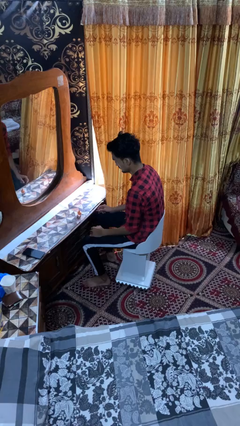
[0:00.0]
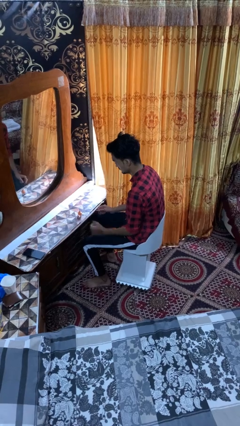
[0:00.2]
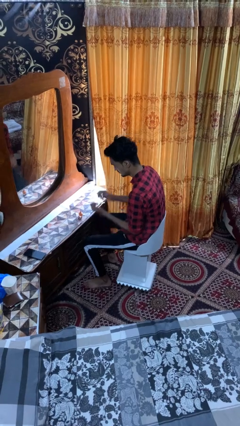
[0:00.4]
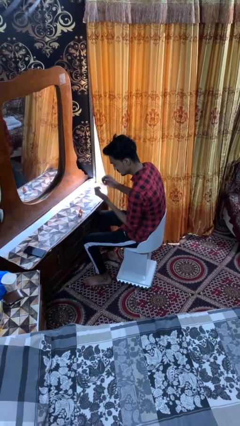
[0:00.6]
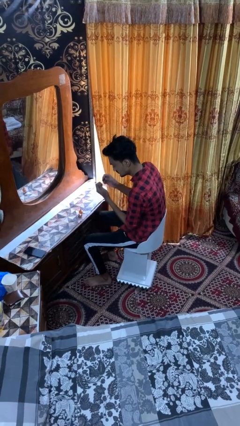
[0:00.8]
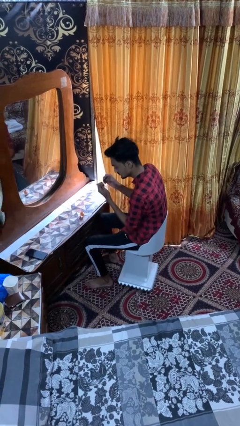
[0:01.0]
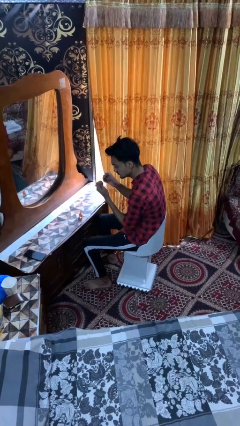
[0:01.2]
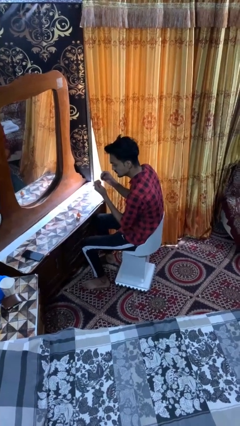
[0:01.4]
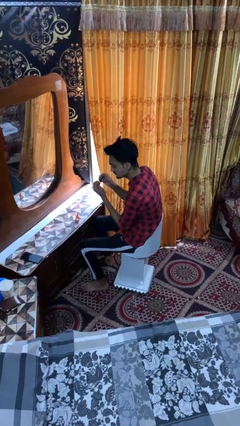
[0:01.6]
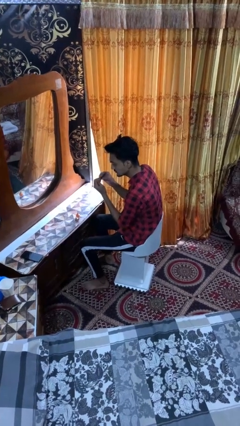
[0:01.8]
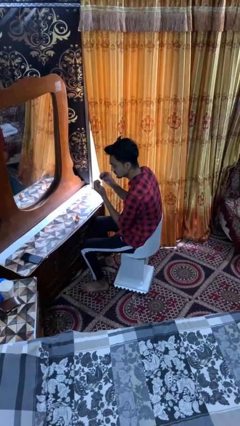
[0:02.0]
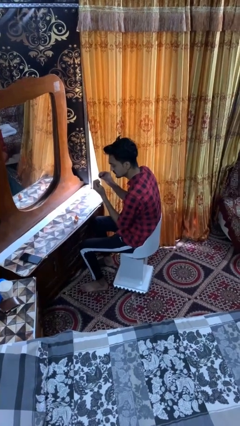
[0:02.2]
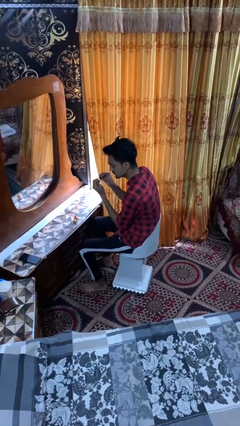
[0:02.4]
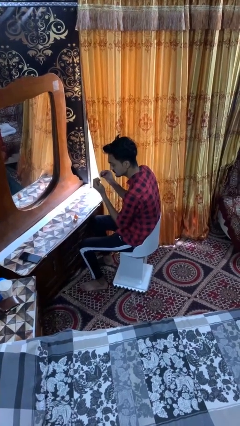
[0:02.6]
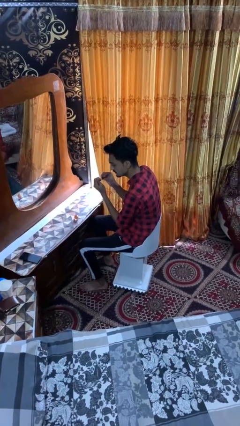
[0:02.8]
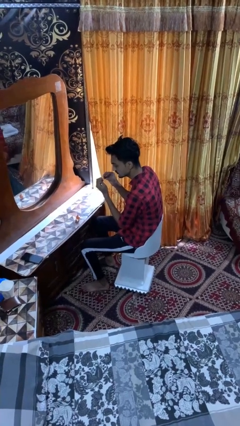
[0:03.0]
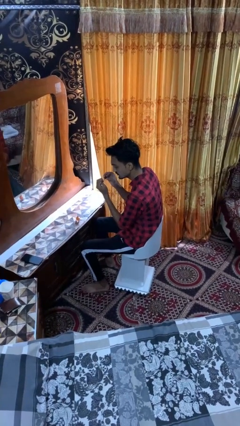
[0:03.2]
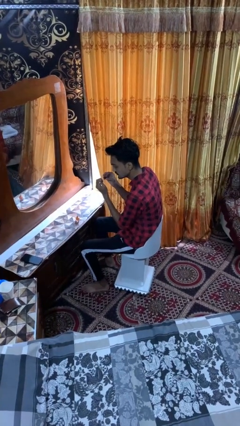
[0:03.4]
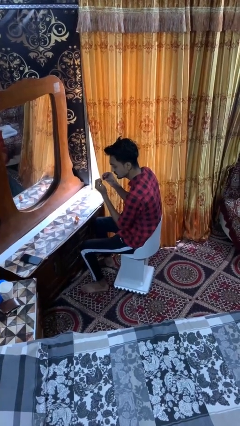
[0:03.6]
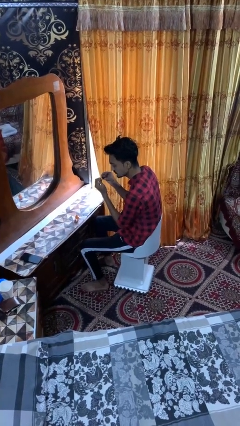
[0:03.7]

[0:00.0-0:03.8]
person paints fingernails

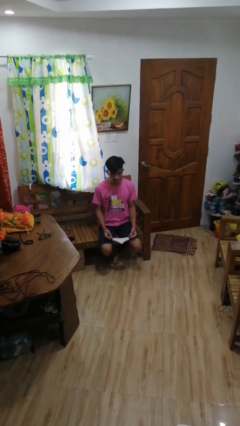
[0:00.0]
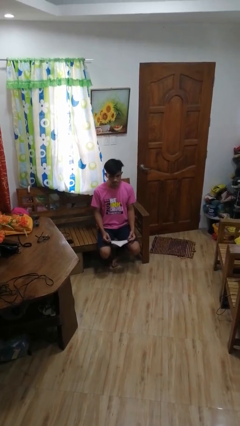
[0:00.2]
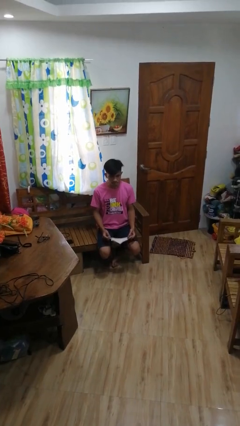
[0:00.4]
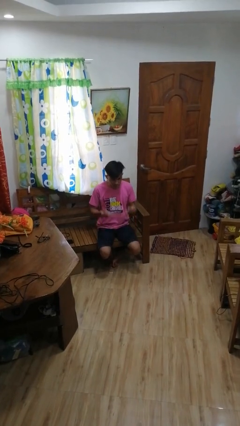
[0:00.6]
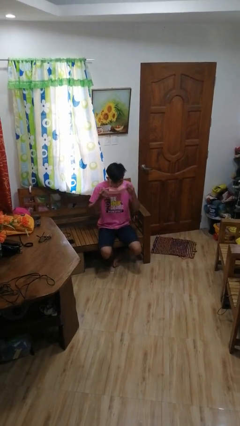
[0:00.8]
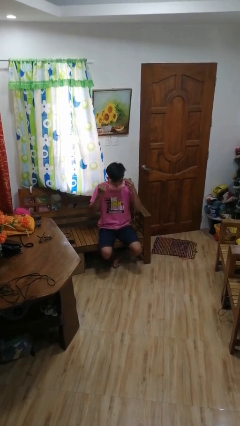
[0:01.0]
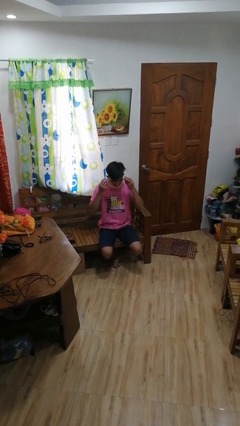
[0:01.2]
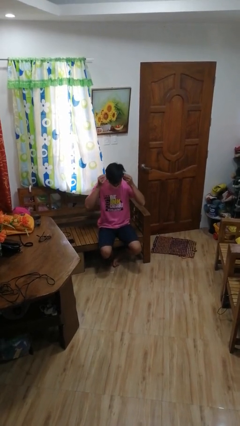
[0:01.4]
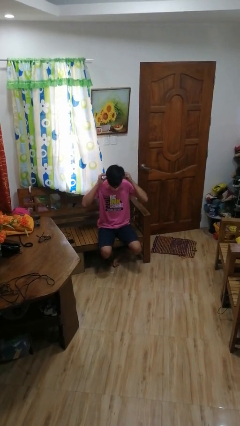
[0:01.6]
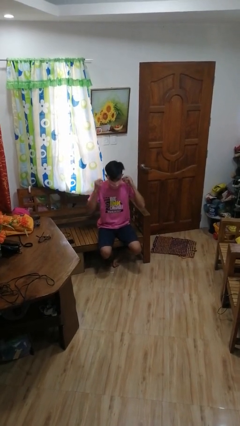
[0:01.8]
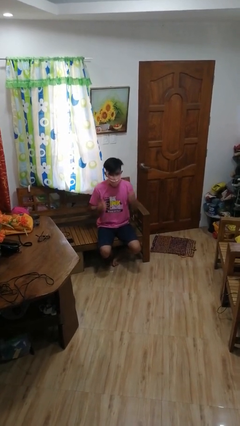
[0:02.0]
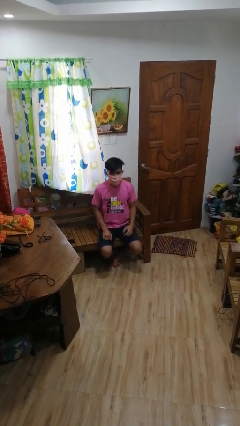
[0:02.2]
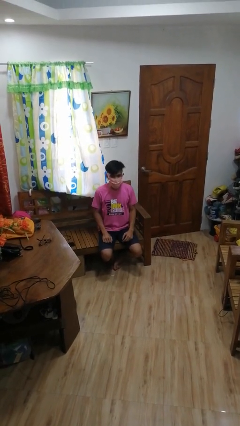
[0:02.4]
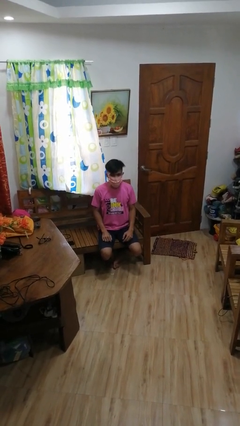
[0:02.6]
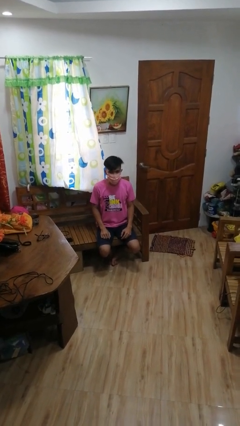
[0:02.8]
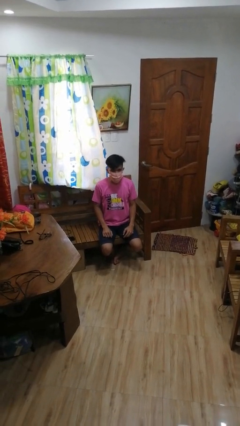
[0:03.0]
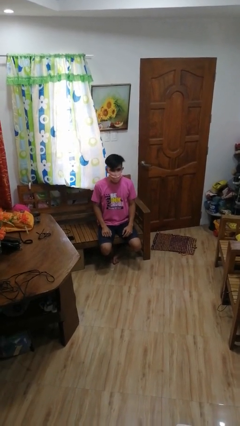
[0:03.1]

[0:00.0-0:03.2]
person puts on facemask

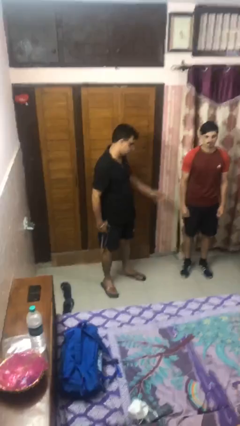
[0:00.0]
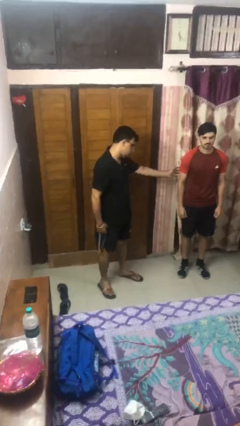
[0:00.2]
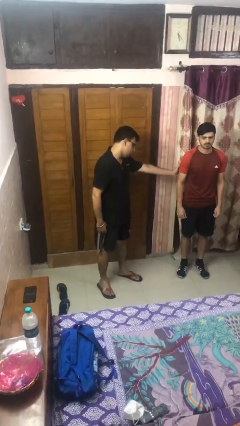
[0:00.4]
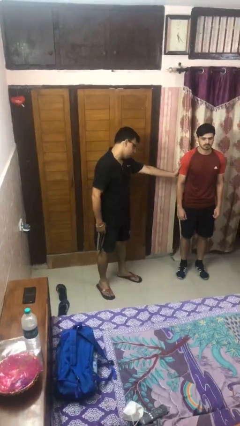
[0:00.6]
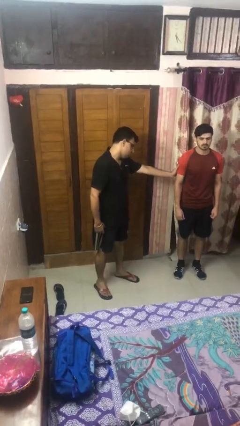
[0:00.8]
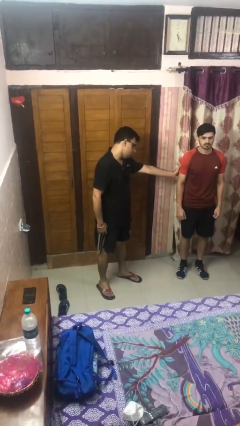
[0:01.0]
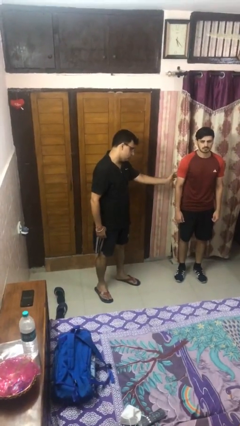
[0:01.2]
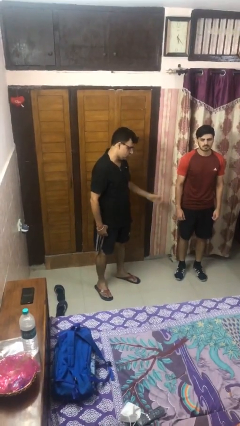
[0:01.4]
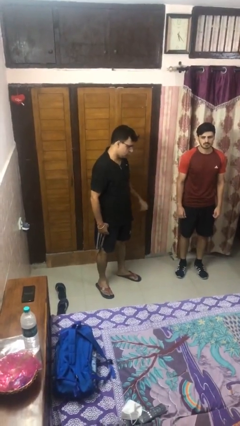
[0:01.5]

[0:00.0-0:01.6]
person grabs person by bicep

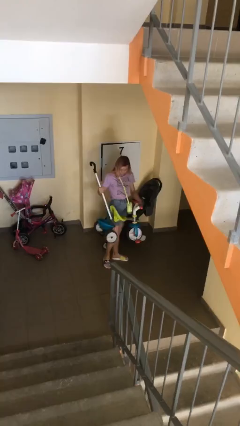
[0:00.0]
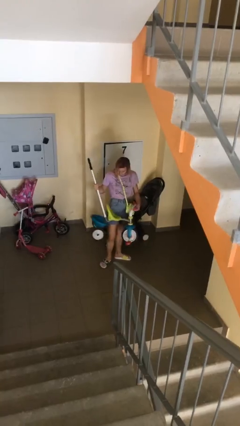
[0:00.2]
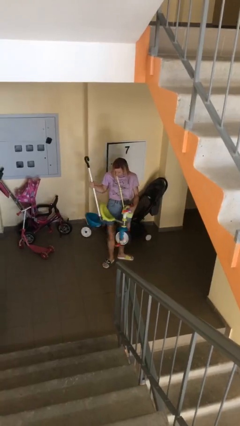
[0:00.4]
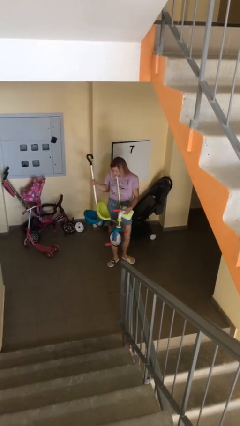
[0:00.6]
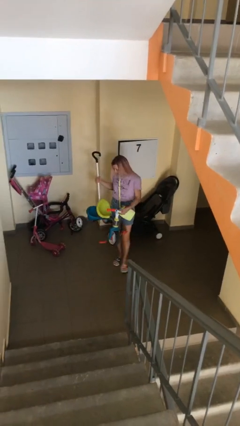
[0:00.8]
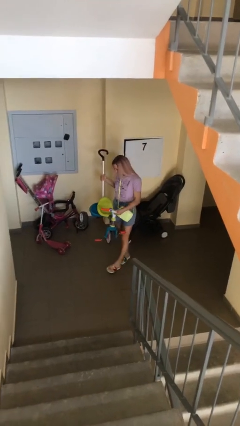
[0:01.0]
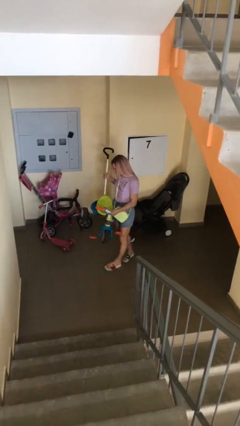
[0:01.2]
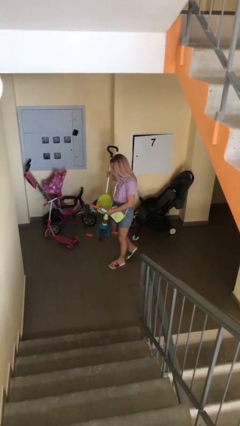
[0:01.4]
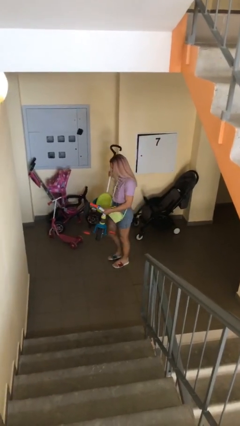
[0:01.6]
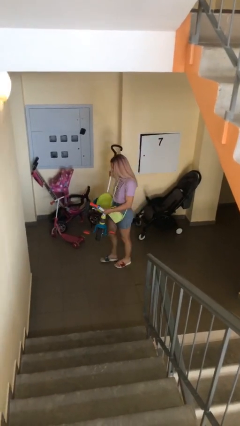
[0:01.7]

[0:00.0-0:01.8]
person carries bicycle

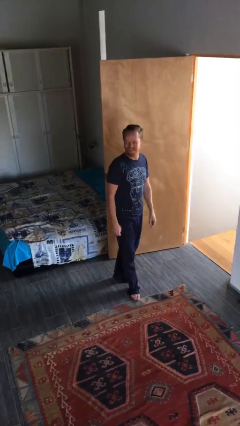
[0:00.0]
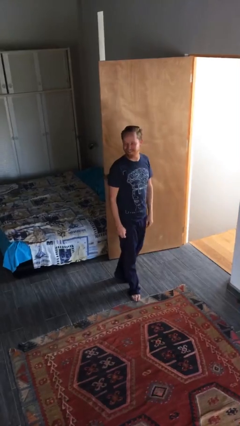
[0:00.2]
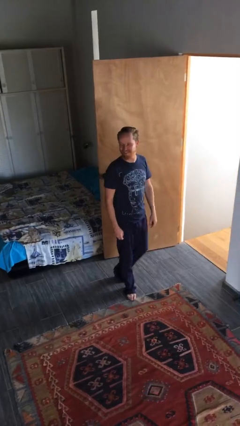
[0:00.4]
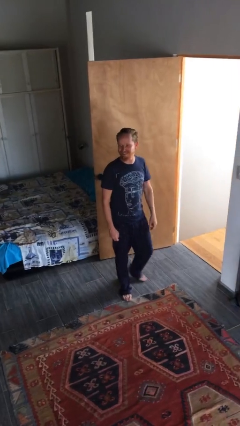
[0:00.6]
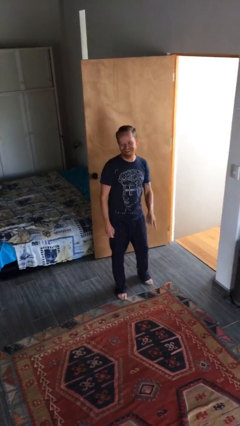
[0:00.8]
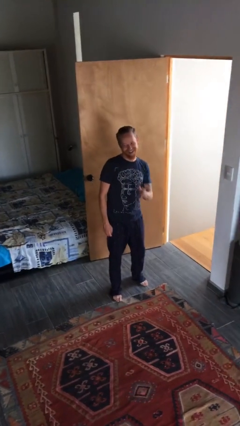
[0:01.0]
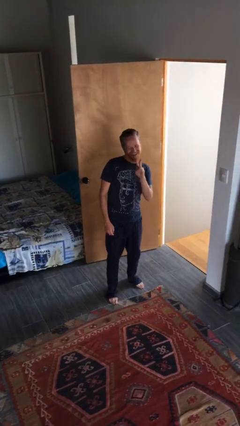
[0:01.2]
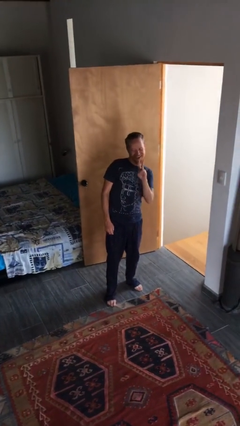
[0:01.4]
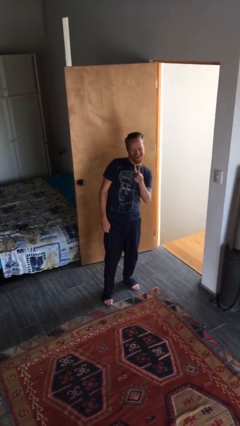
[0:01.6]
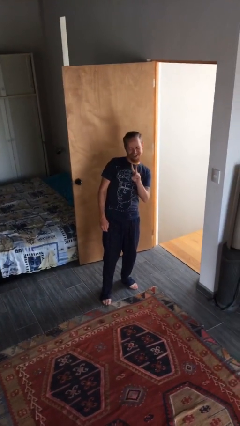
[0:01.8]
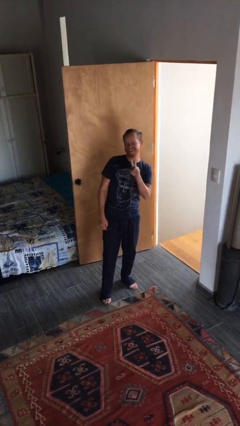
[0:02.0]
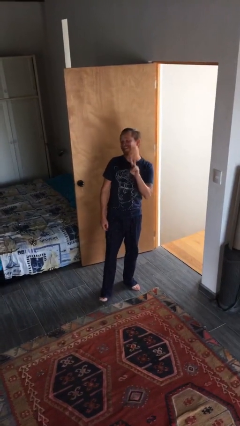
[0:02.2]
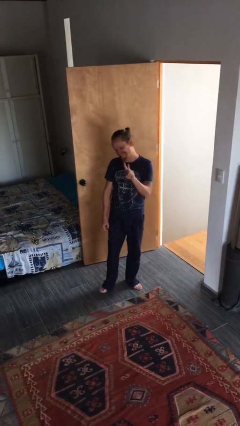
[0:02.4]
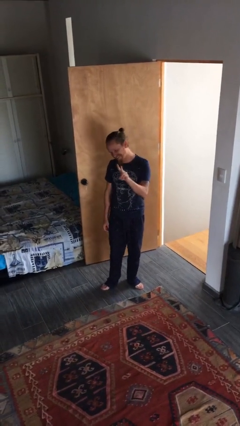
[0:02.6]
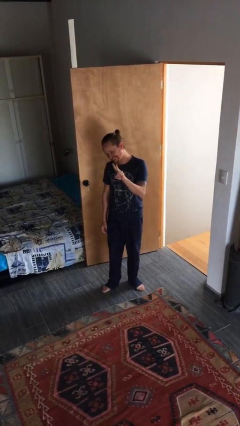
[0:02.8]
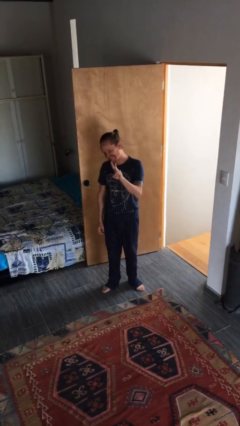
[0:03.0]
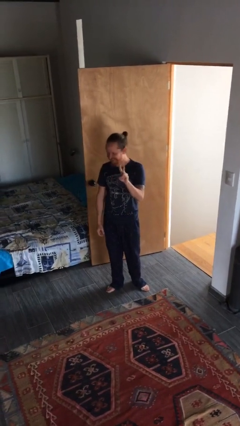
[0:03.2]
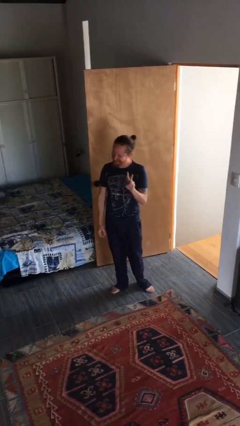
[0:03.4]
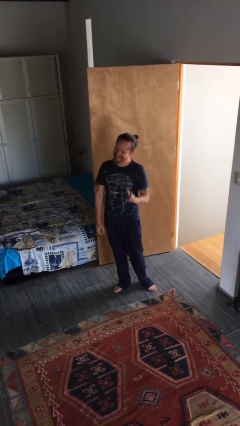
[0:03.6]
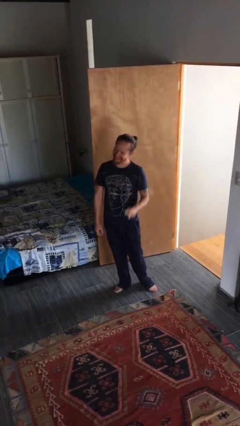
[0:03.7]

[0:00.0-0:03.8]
person gestures peace

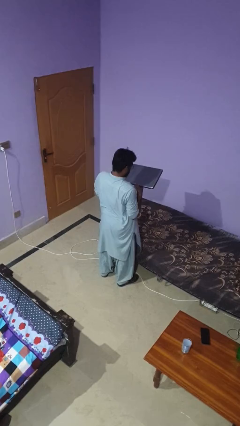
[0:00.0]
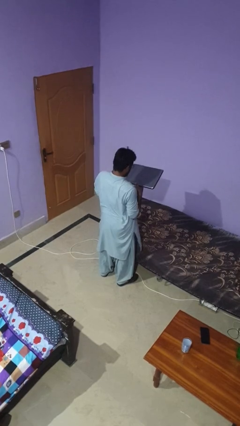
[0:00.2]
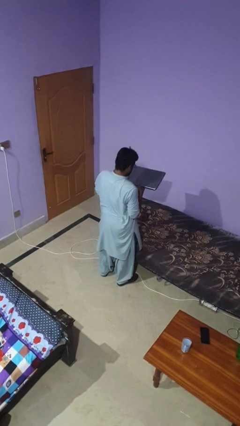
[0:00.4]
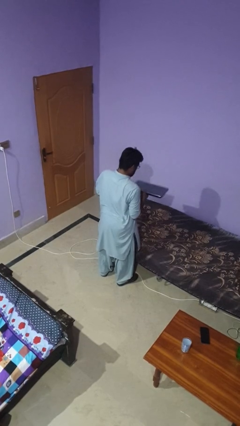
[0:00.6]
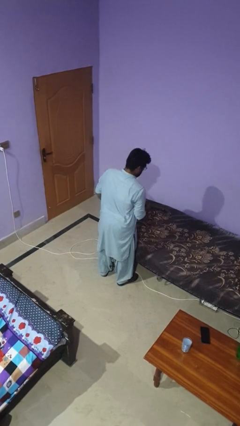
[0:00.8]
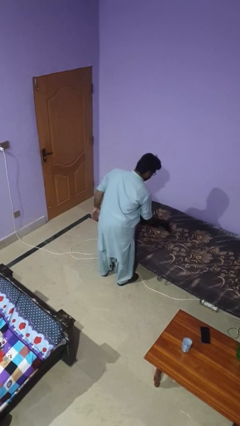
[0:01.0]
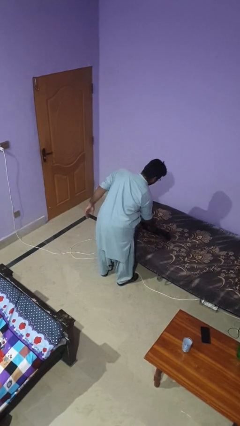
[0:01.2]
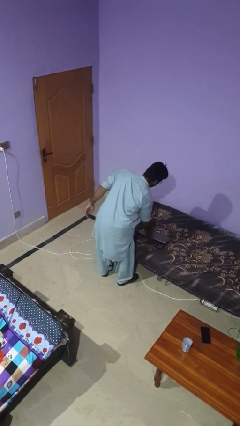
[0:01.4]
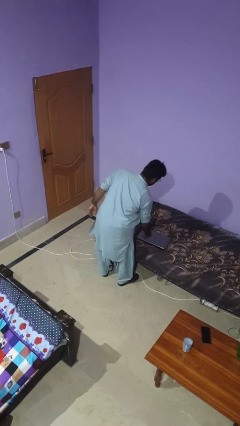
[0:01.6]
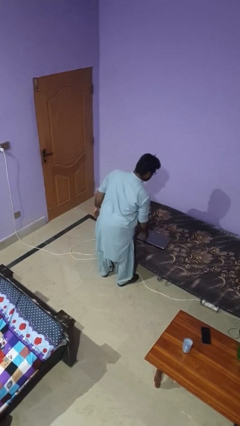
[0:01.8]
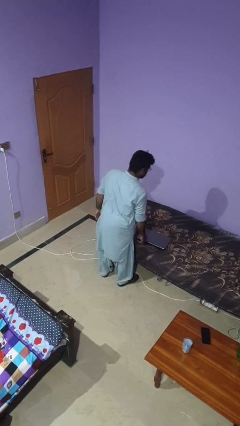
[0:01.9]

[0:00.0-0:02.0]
person puts down object on bed

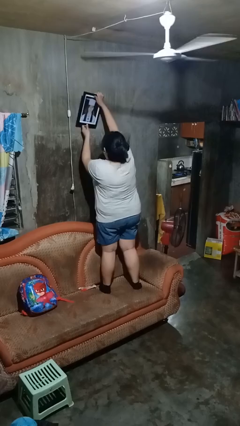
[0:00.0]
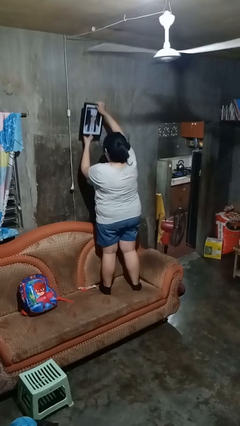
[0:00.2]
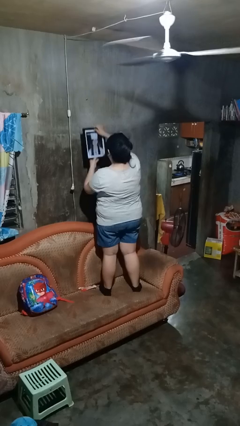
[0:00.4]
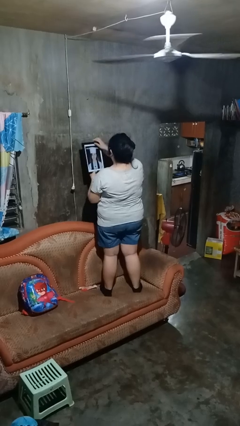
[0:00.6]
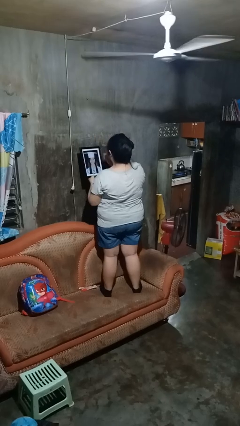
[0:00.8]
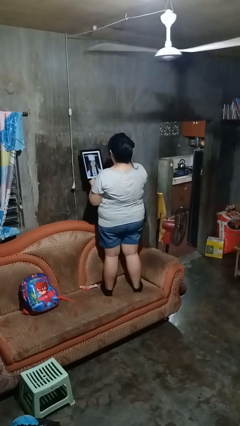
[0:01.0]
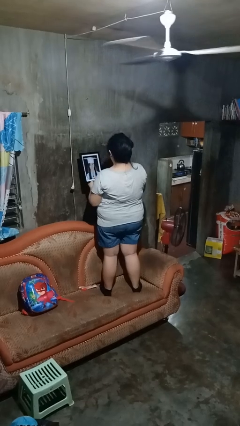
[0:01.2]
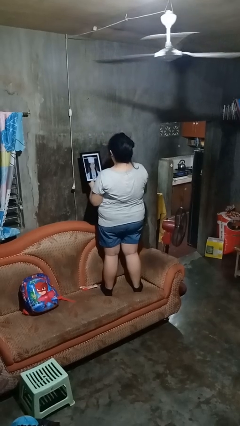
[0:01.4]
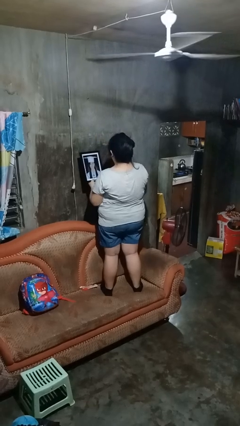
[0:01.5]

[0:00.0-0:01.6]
person takes down picture frame
